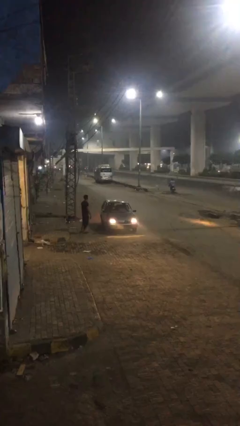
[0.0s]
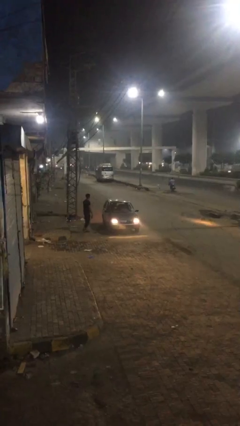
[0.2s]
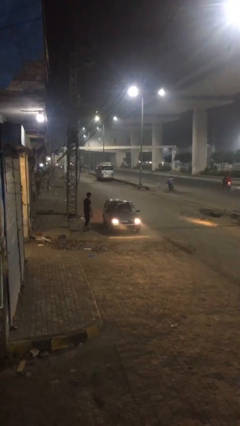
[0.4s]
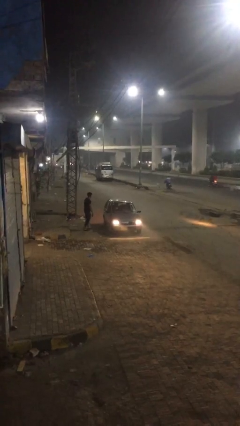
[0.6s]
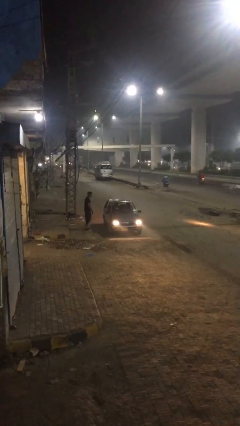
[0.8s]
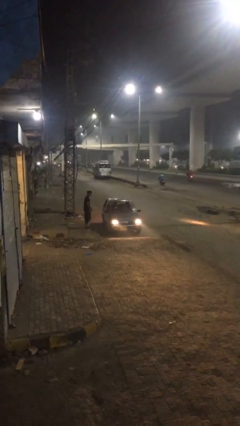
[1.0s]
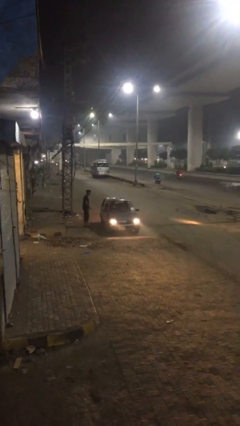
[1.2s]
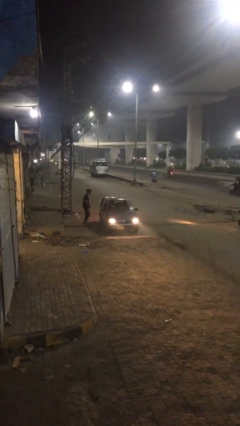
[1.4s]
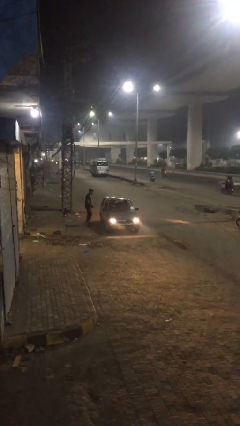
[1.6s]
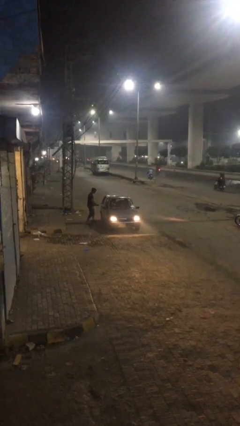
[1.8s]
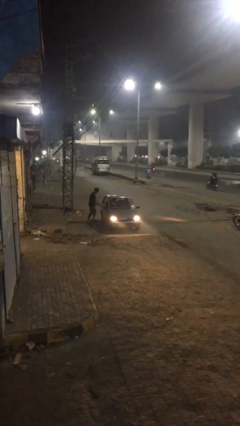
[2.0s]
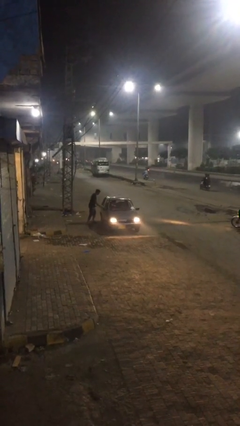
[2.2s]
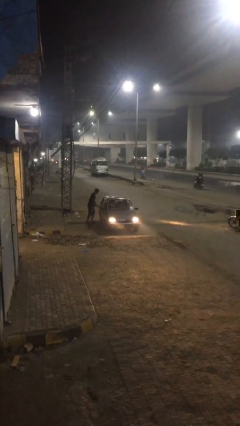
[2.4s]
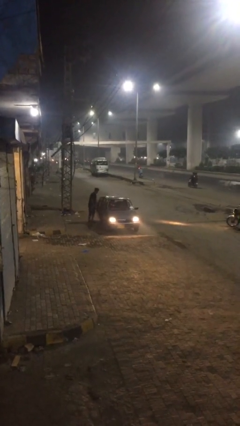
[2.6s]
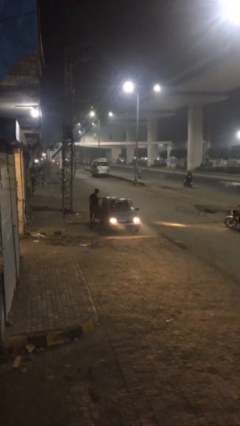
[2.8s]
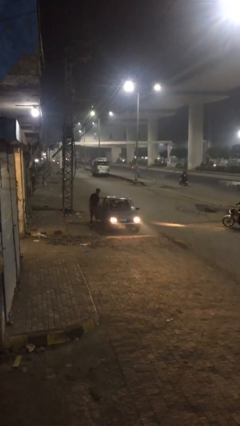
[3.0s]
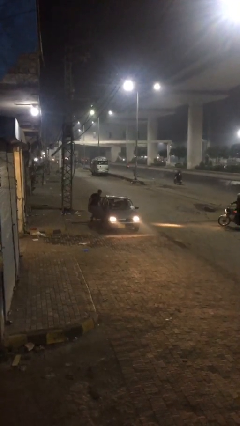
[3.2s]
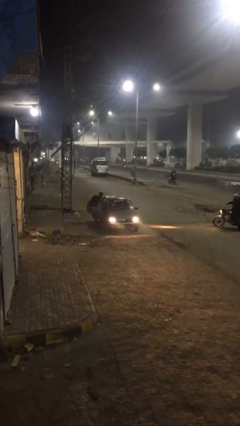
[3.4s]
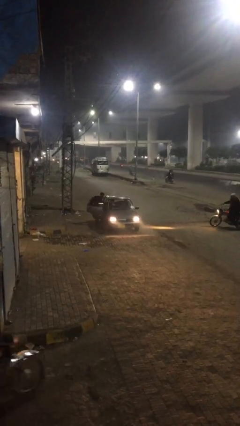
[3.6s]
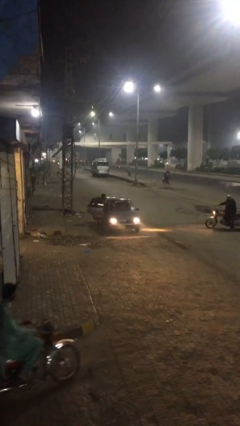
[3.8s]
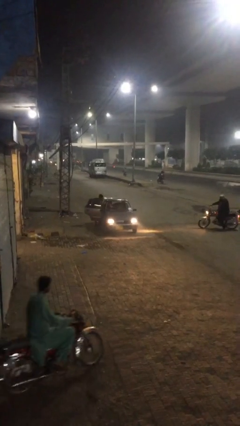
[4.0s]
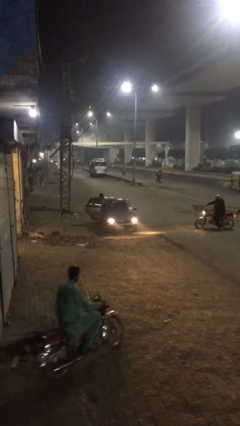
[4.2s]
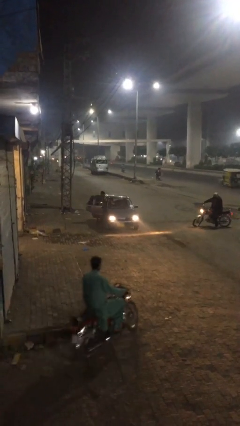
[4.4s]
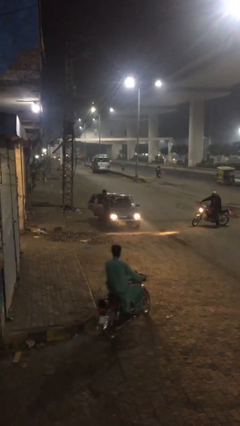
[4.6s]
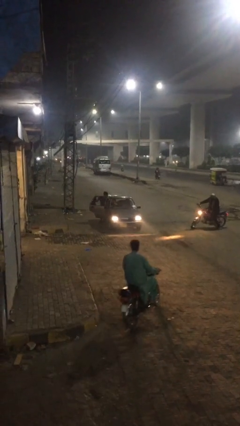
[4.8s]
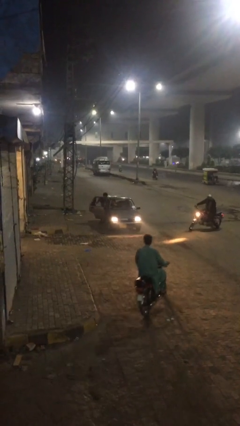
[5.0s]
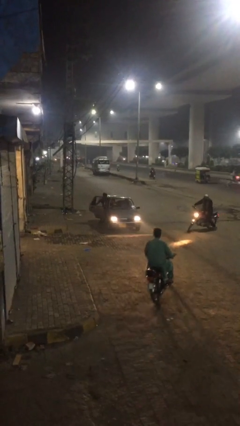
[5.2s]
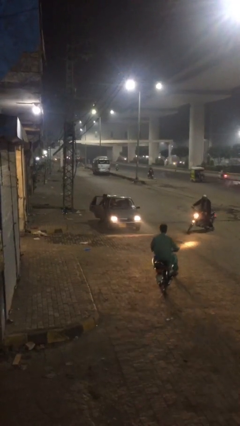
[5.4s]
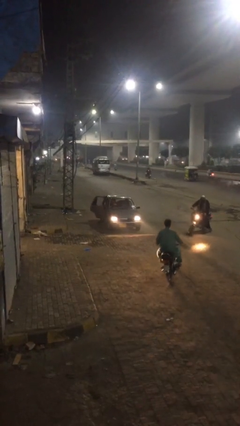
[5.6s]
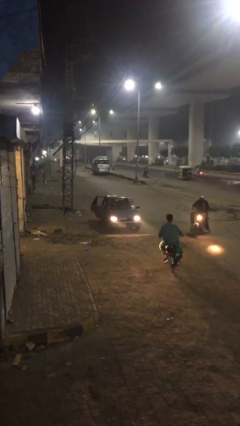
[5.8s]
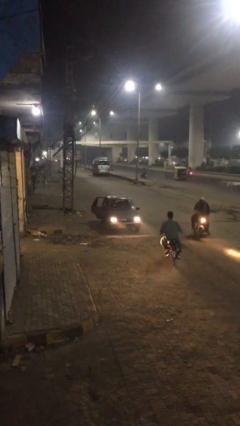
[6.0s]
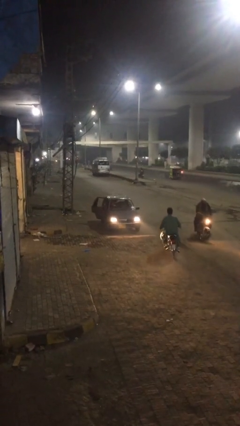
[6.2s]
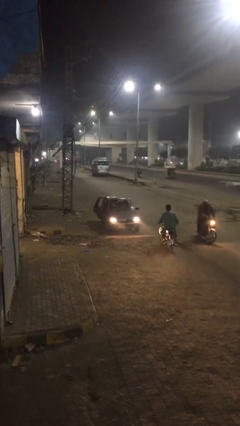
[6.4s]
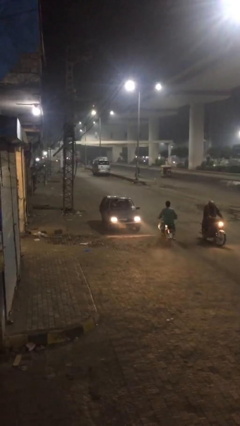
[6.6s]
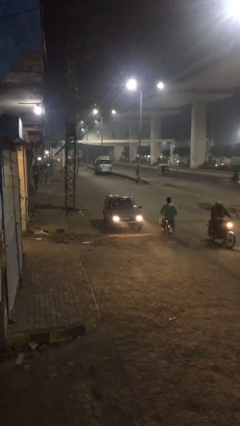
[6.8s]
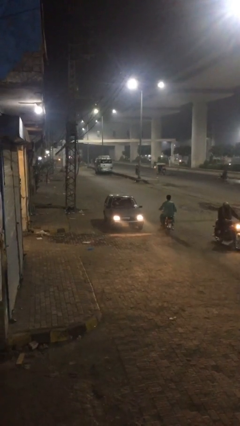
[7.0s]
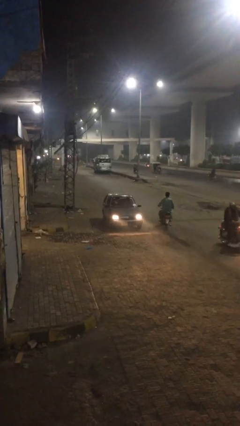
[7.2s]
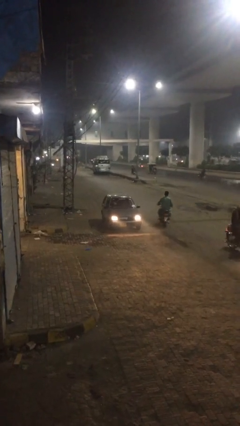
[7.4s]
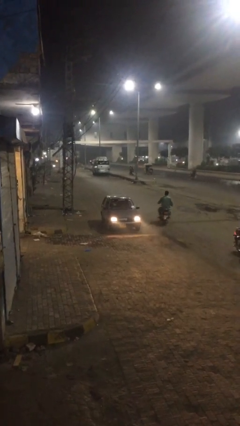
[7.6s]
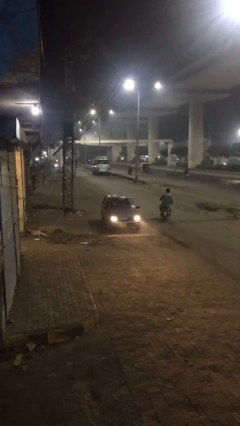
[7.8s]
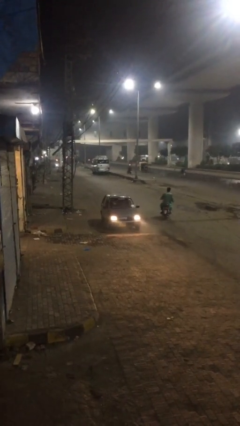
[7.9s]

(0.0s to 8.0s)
car picks up person

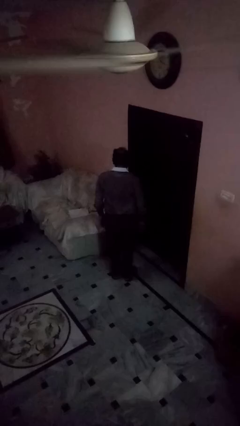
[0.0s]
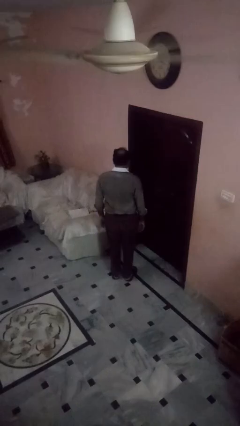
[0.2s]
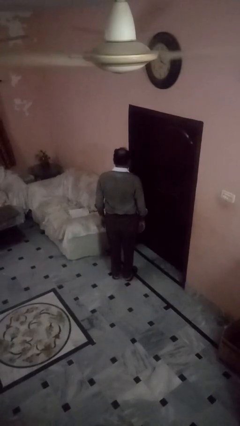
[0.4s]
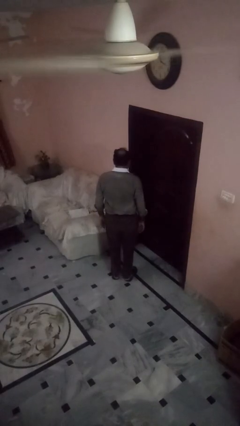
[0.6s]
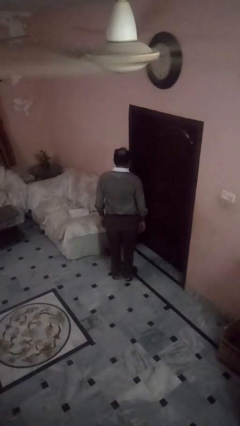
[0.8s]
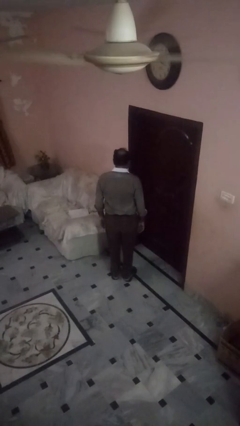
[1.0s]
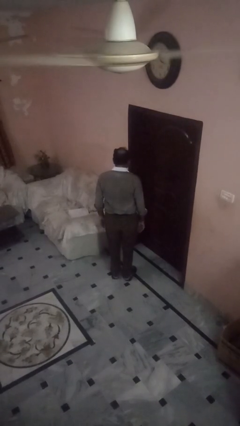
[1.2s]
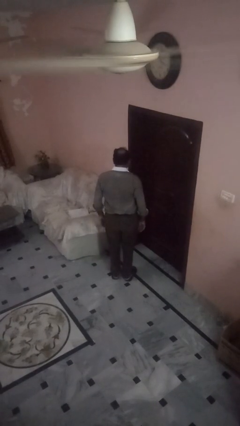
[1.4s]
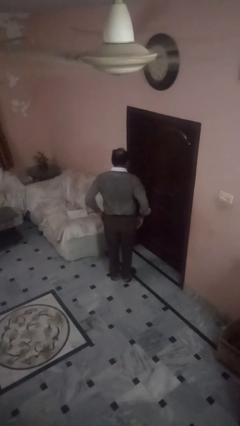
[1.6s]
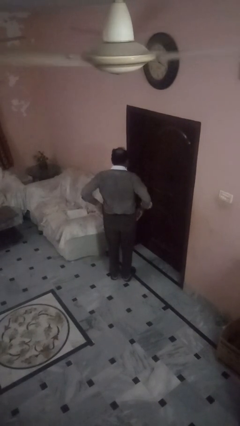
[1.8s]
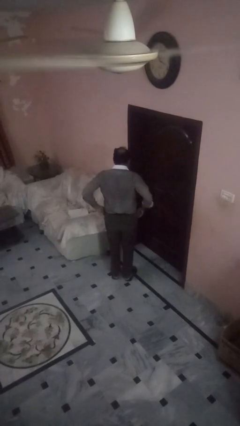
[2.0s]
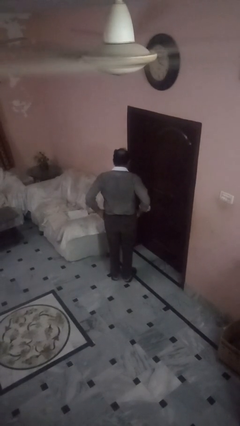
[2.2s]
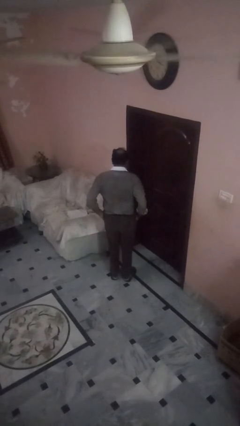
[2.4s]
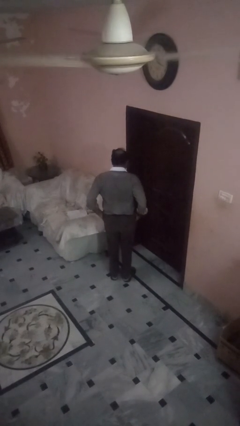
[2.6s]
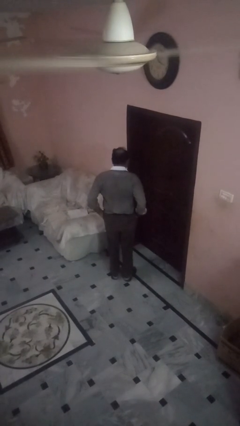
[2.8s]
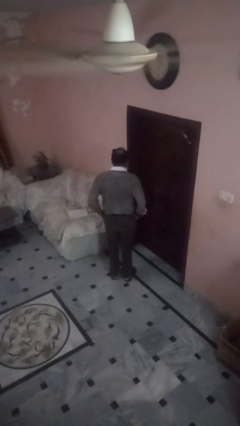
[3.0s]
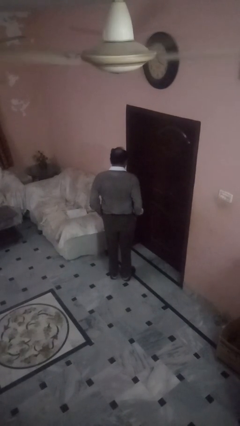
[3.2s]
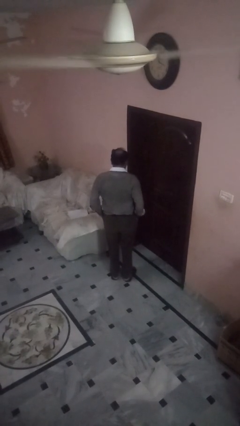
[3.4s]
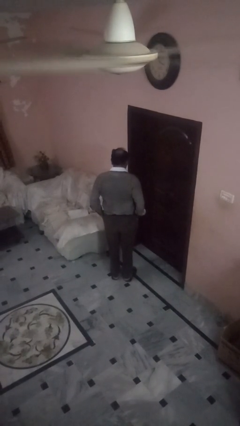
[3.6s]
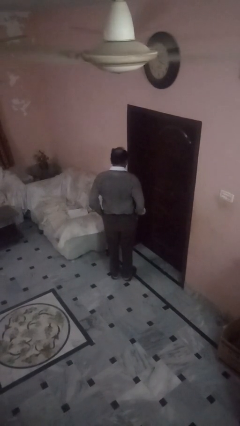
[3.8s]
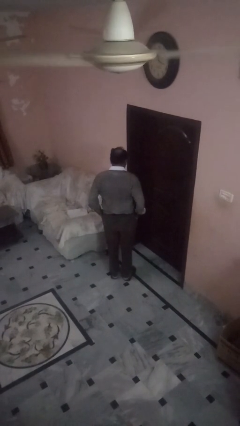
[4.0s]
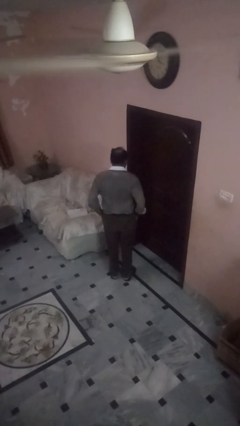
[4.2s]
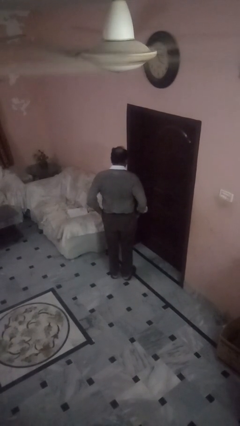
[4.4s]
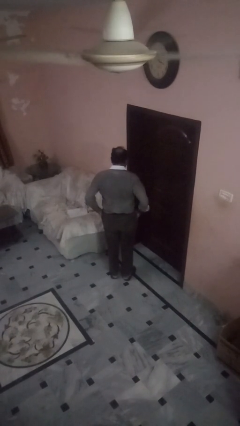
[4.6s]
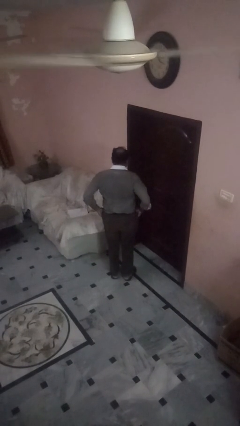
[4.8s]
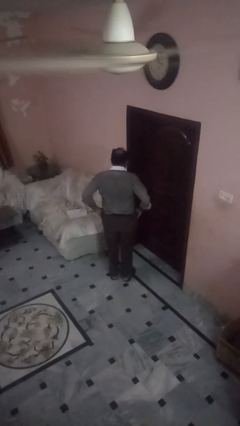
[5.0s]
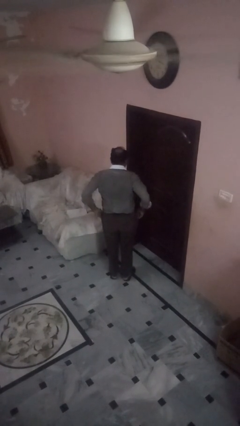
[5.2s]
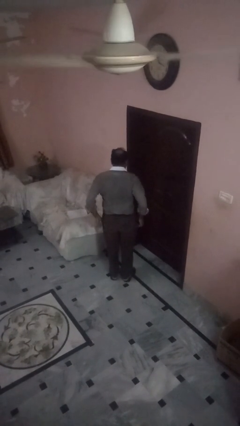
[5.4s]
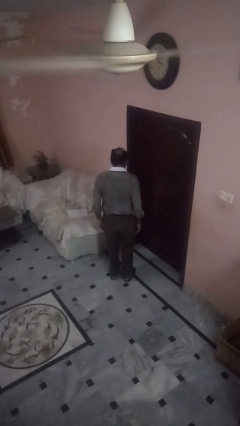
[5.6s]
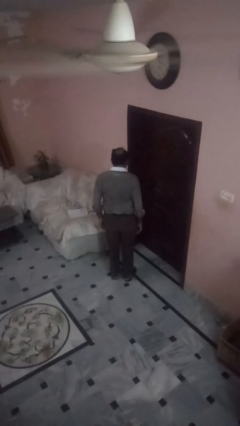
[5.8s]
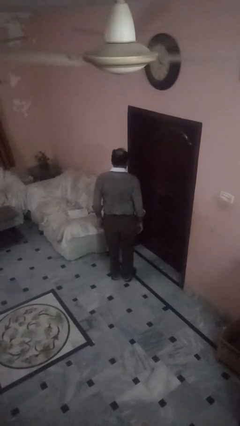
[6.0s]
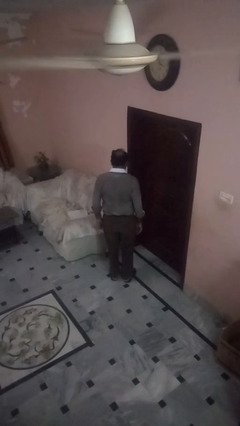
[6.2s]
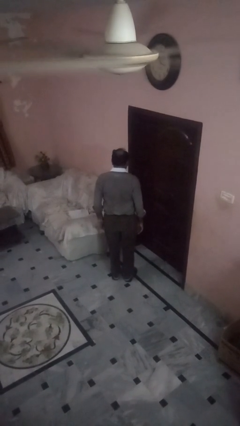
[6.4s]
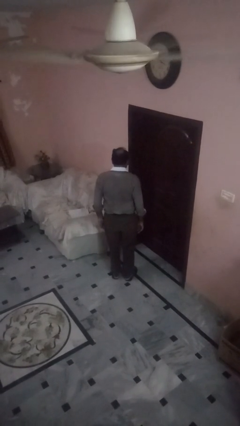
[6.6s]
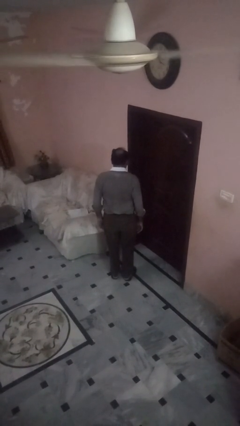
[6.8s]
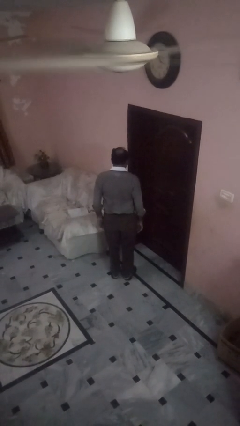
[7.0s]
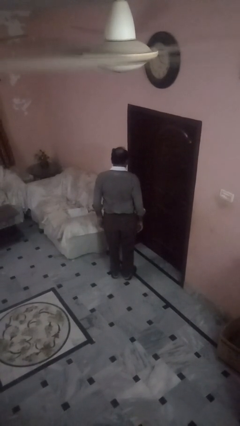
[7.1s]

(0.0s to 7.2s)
person puts hands in back pockets

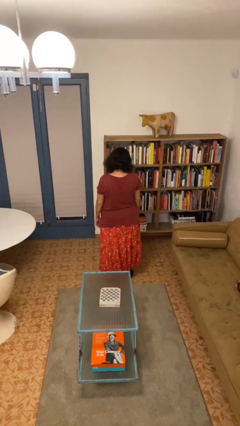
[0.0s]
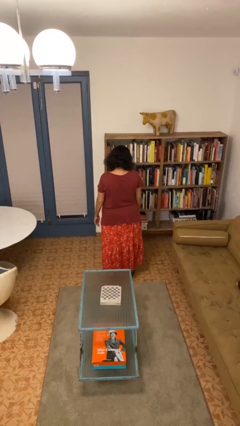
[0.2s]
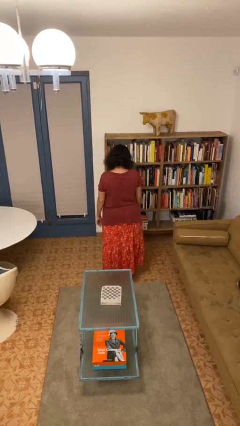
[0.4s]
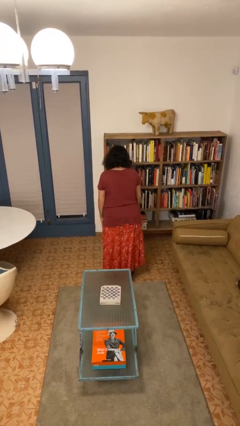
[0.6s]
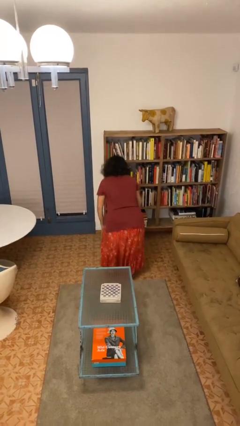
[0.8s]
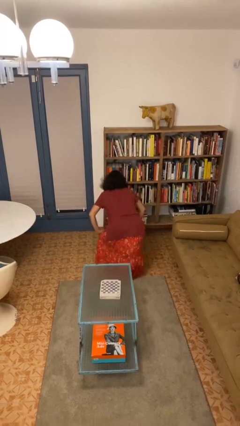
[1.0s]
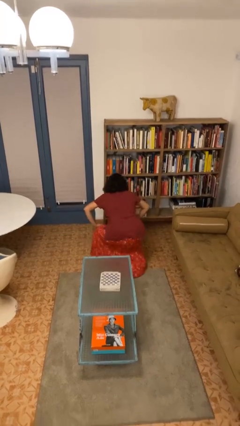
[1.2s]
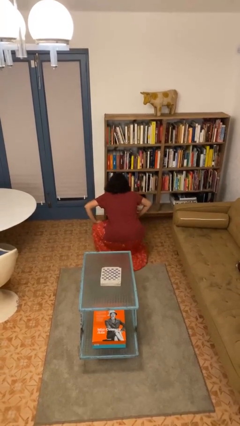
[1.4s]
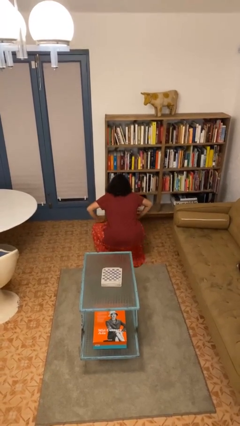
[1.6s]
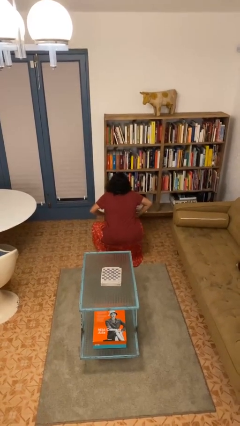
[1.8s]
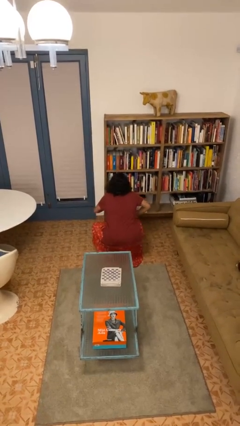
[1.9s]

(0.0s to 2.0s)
person squats

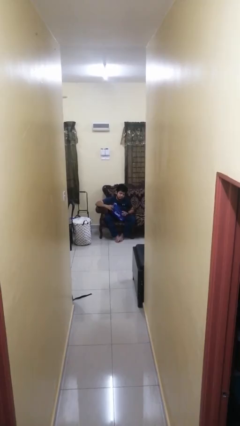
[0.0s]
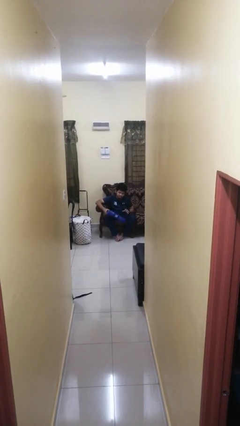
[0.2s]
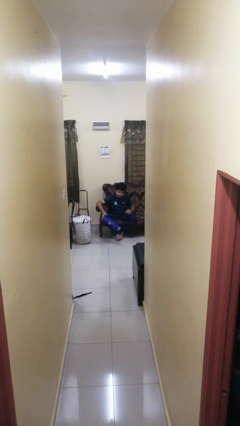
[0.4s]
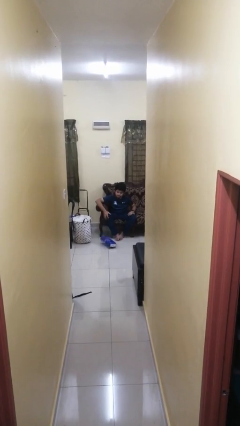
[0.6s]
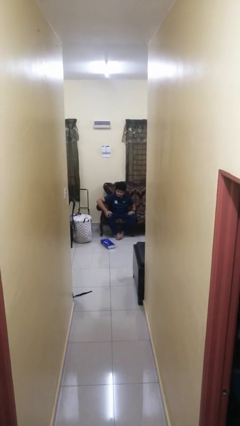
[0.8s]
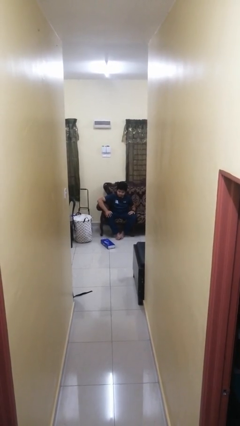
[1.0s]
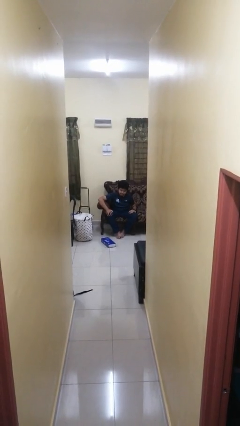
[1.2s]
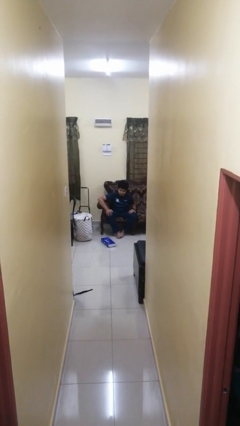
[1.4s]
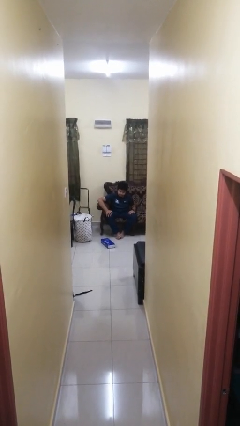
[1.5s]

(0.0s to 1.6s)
person drops object
